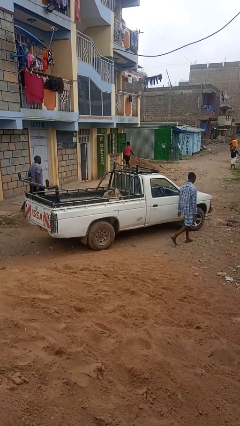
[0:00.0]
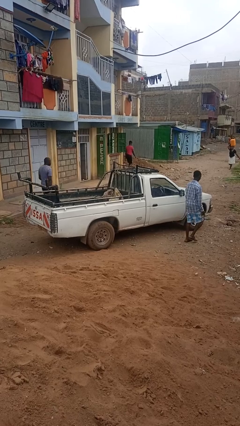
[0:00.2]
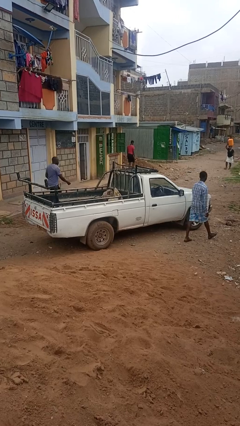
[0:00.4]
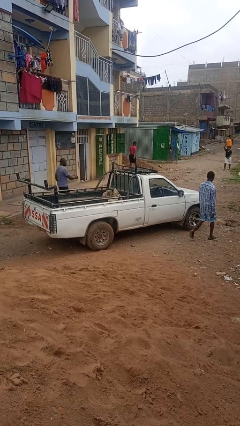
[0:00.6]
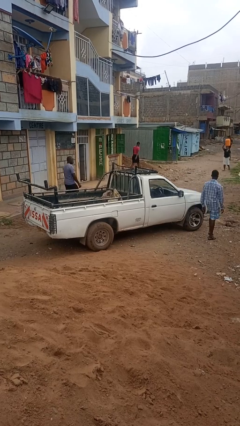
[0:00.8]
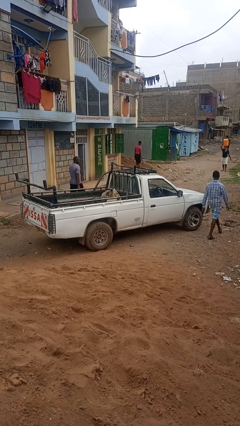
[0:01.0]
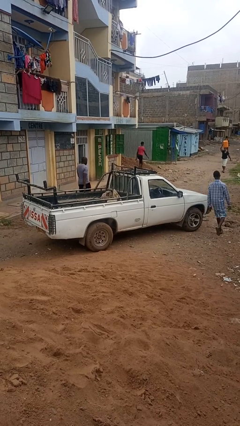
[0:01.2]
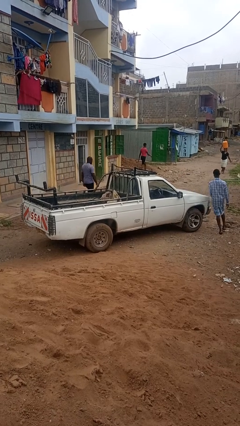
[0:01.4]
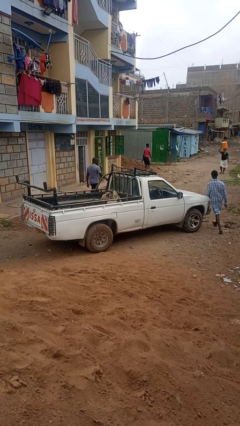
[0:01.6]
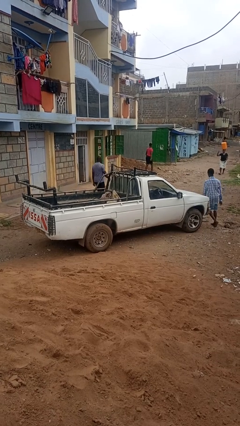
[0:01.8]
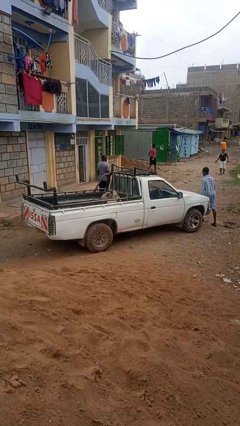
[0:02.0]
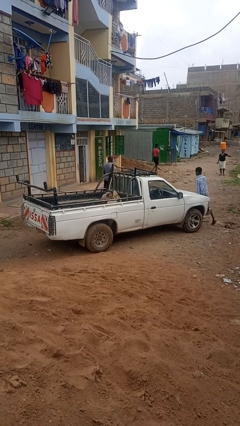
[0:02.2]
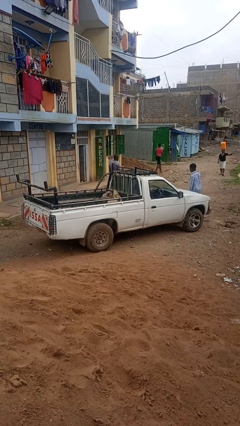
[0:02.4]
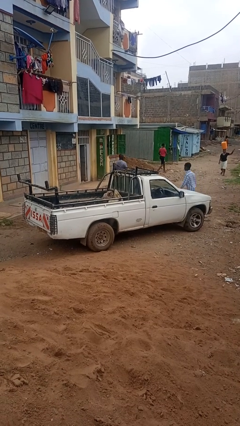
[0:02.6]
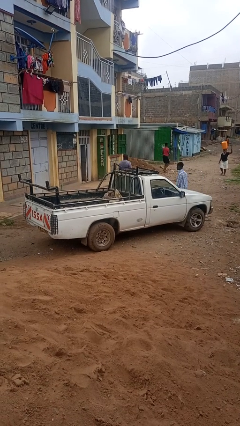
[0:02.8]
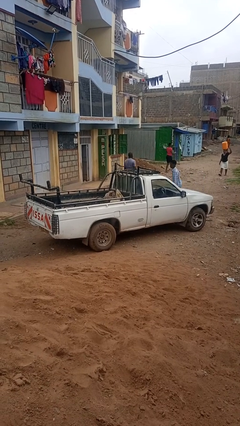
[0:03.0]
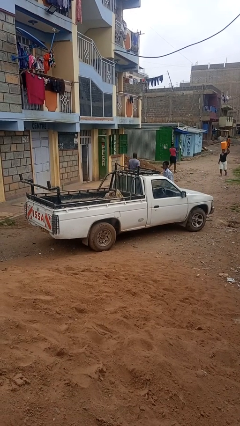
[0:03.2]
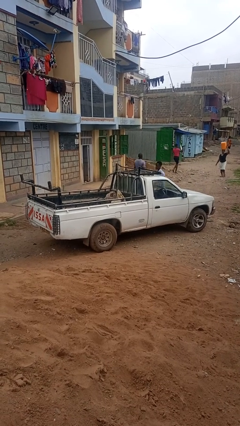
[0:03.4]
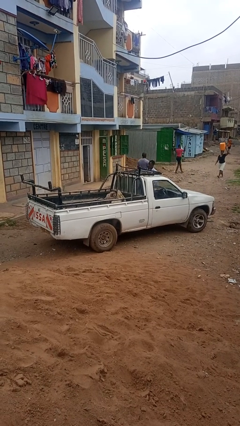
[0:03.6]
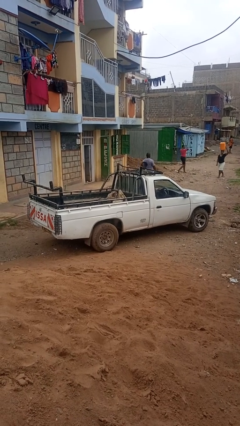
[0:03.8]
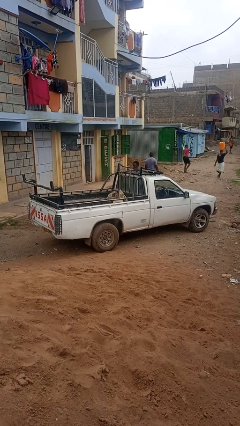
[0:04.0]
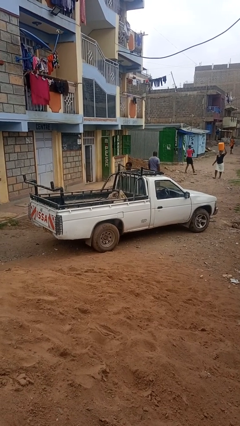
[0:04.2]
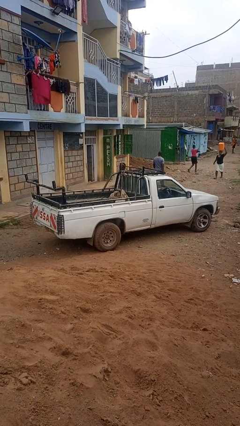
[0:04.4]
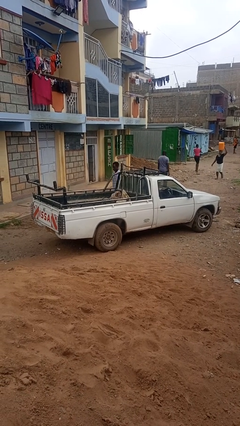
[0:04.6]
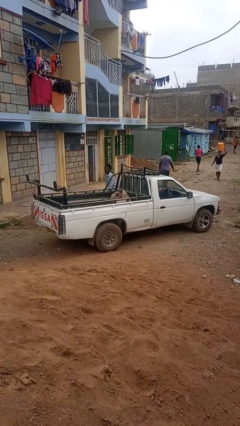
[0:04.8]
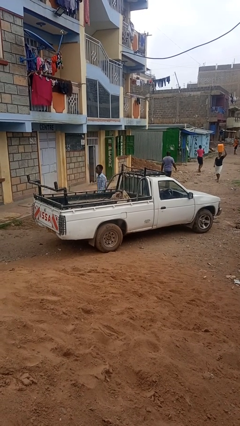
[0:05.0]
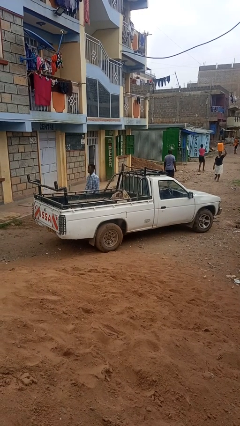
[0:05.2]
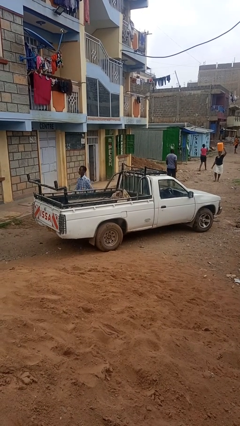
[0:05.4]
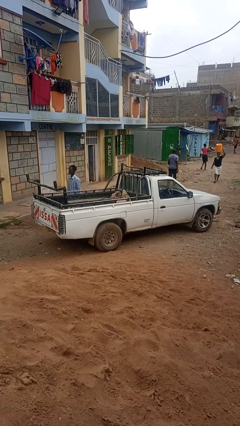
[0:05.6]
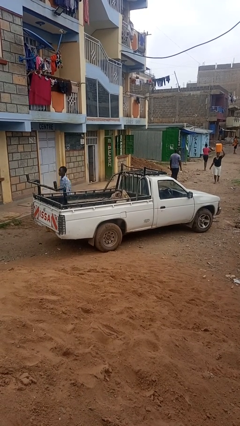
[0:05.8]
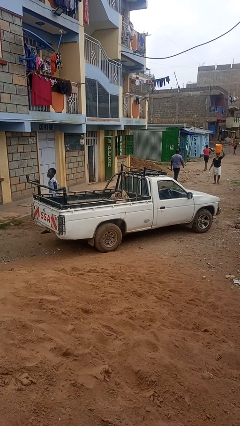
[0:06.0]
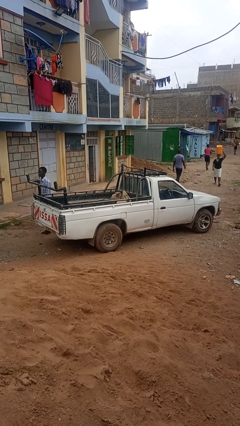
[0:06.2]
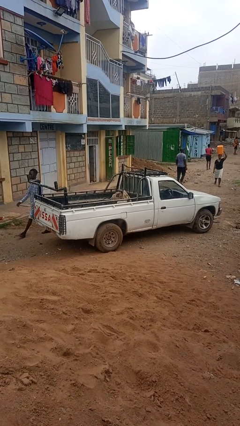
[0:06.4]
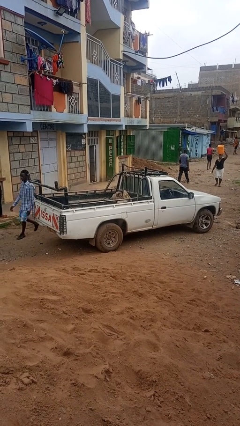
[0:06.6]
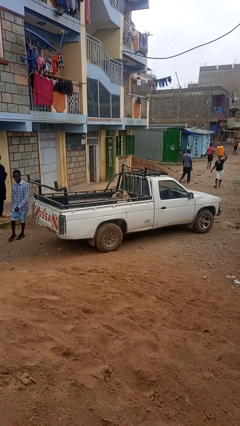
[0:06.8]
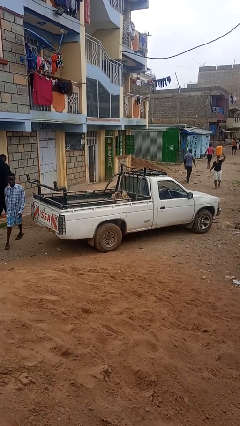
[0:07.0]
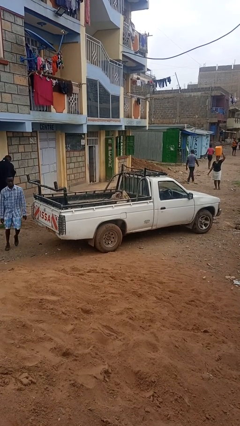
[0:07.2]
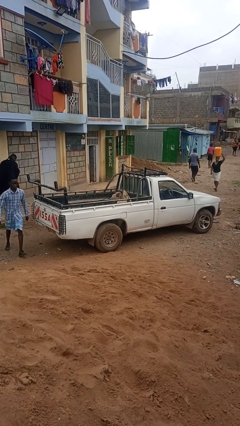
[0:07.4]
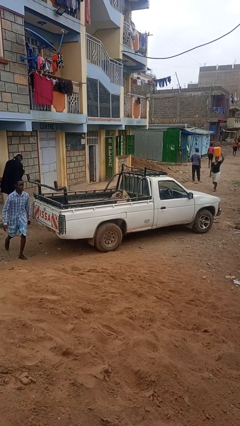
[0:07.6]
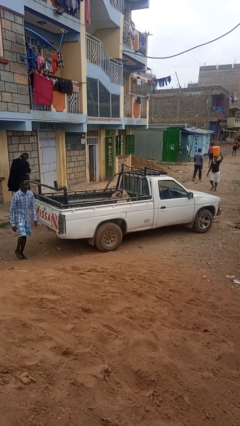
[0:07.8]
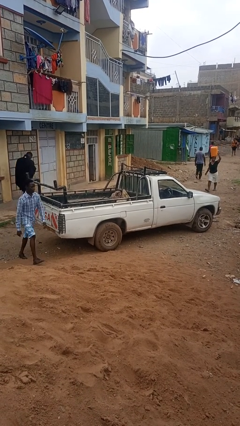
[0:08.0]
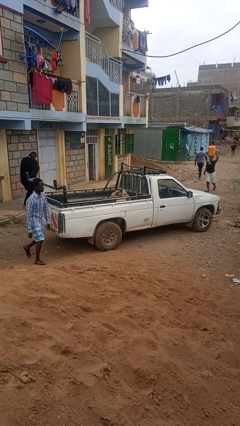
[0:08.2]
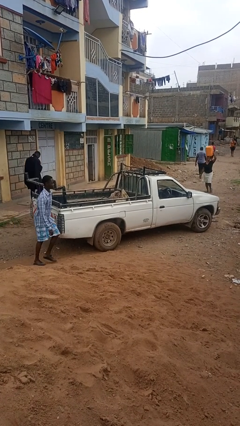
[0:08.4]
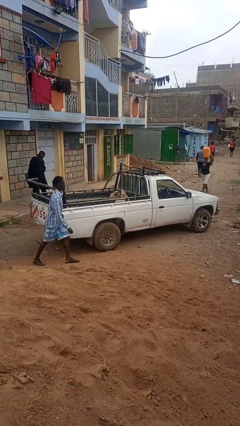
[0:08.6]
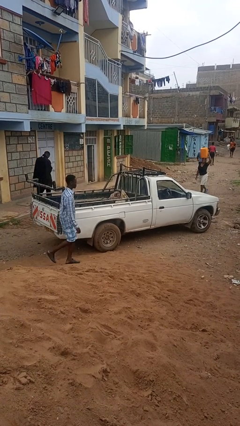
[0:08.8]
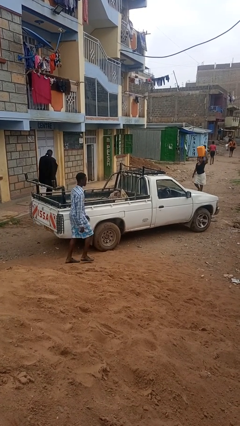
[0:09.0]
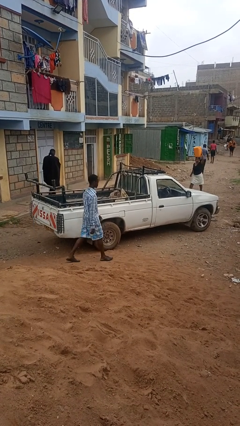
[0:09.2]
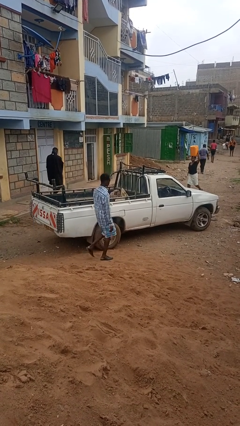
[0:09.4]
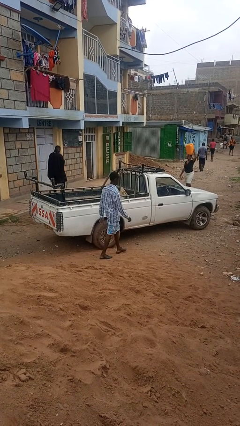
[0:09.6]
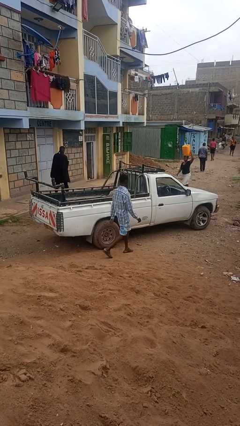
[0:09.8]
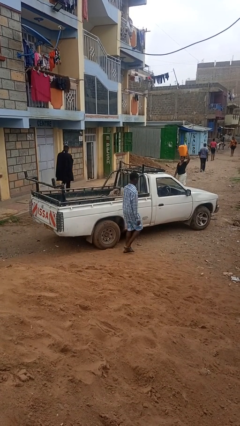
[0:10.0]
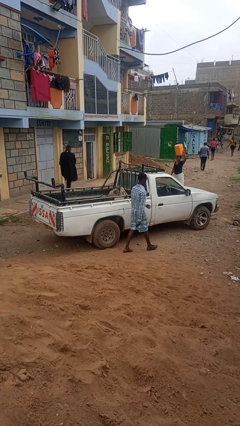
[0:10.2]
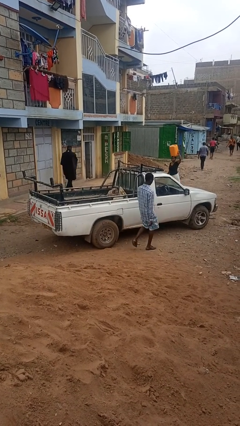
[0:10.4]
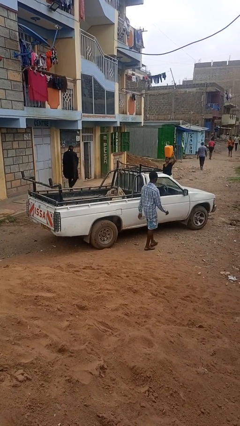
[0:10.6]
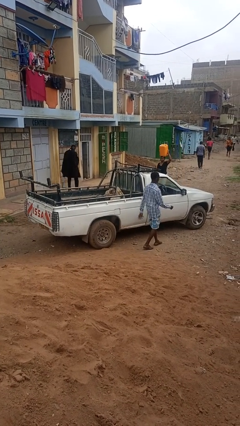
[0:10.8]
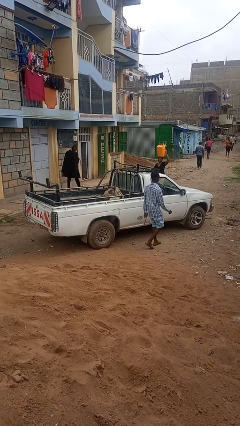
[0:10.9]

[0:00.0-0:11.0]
person walks around car

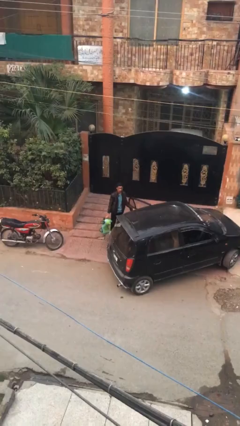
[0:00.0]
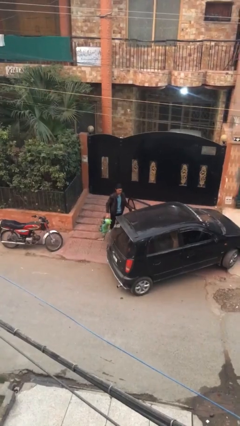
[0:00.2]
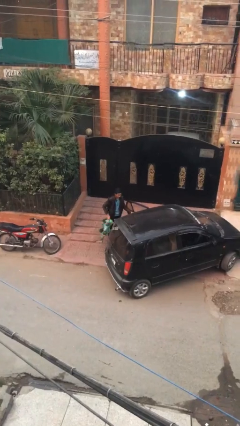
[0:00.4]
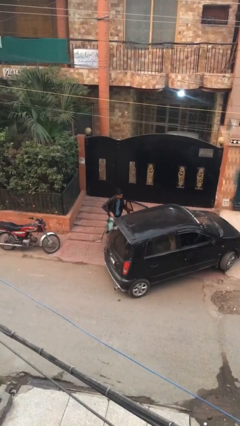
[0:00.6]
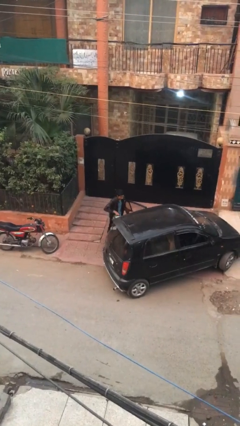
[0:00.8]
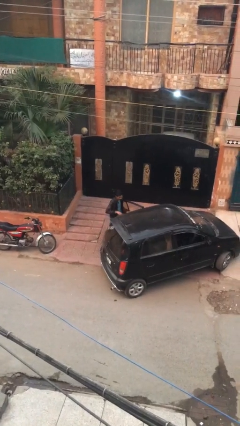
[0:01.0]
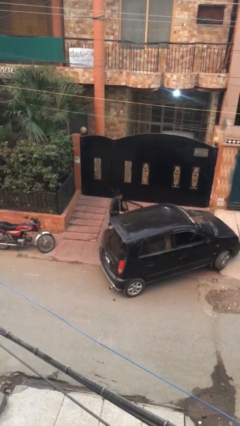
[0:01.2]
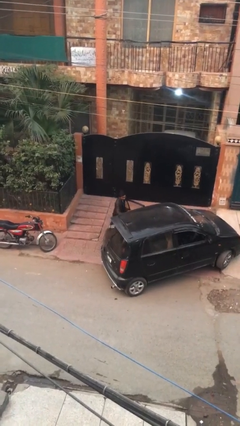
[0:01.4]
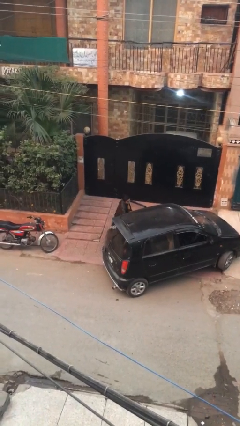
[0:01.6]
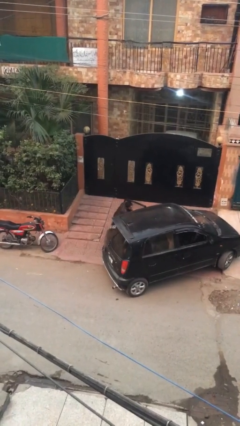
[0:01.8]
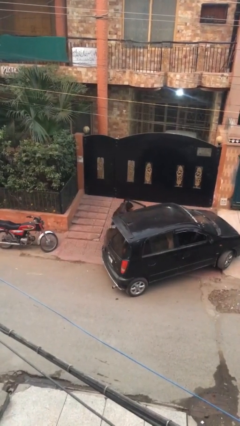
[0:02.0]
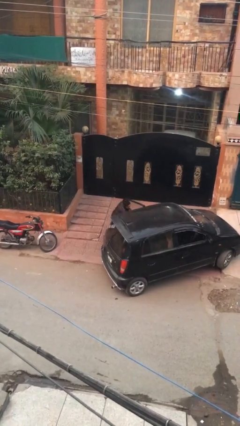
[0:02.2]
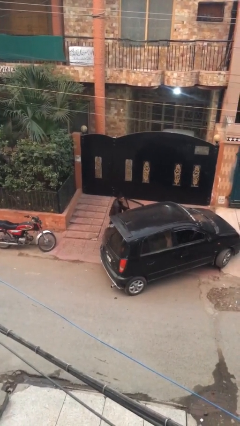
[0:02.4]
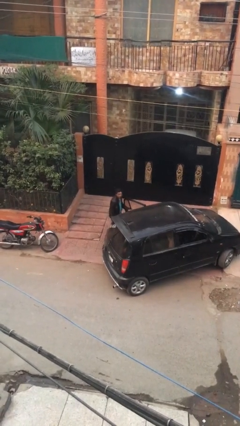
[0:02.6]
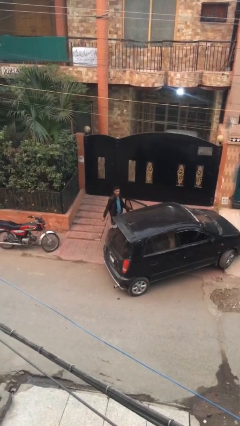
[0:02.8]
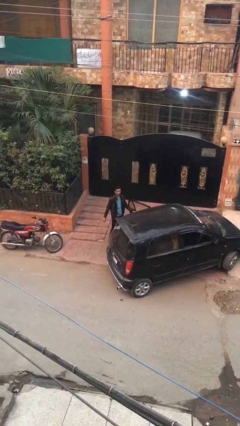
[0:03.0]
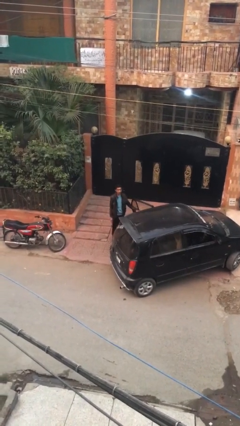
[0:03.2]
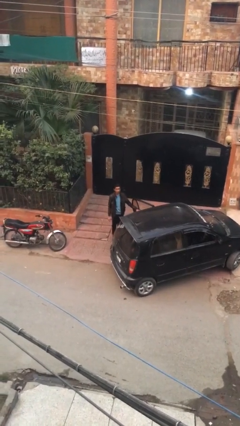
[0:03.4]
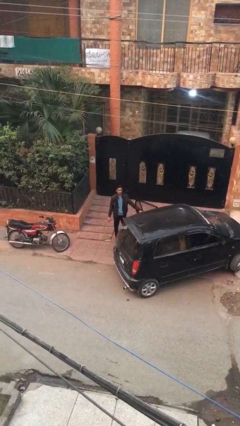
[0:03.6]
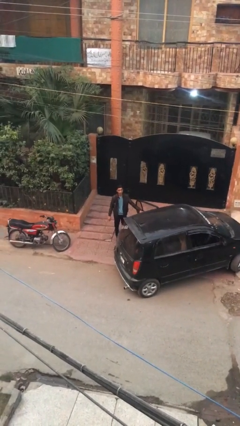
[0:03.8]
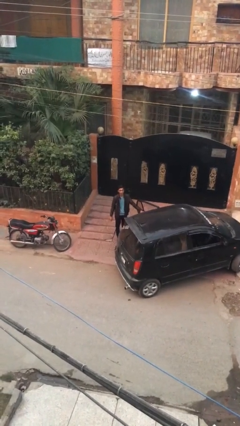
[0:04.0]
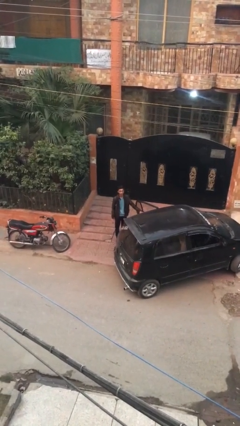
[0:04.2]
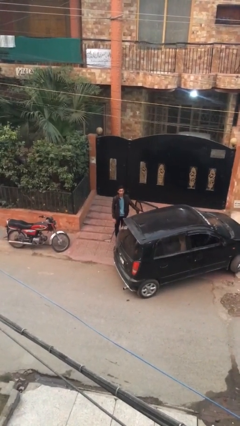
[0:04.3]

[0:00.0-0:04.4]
person loads car

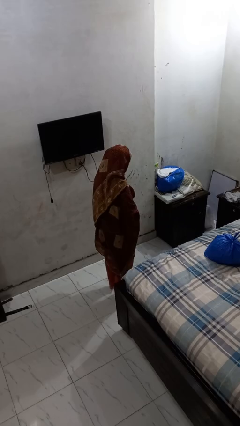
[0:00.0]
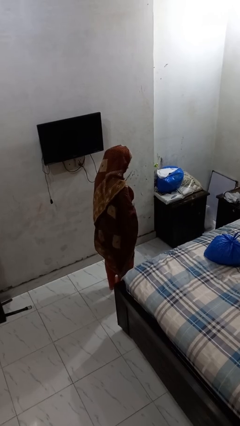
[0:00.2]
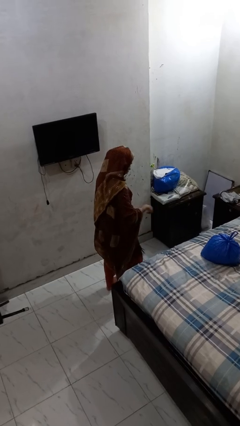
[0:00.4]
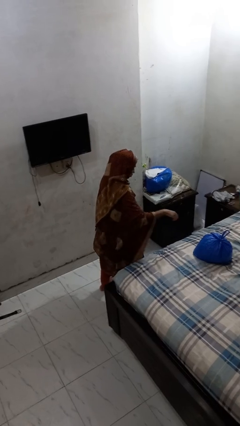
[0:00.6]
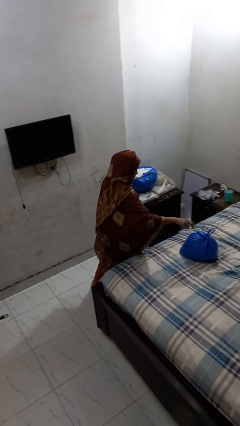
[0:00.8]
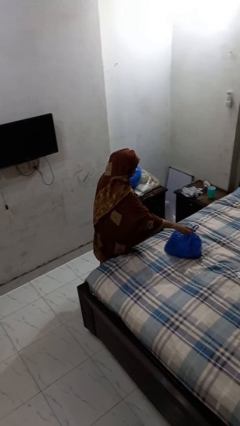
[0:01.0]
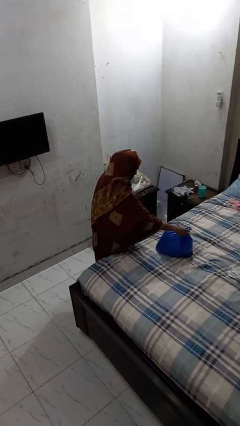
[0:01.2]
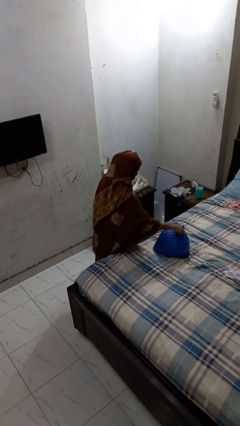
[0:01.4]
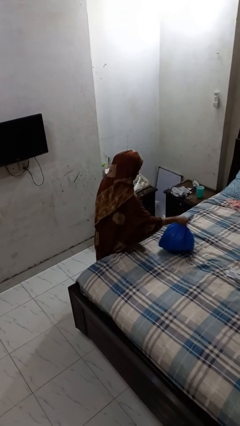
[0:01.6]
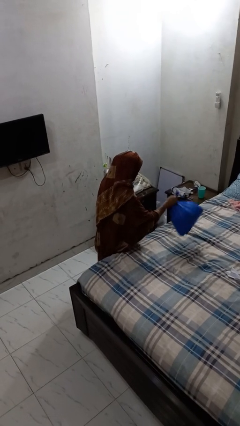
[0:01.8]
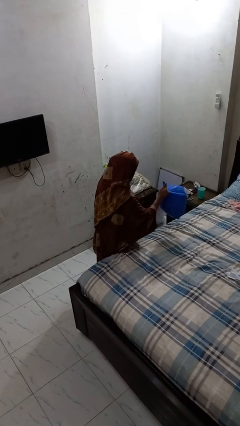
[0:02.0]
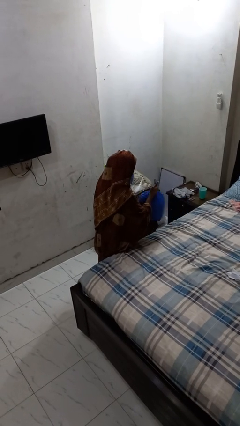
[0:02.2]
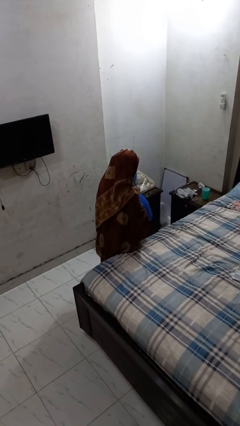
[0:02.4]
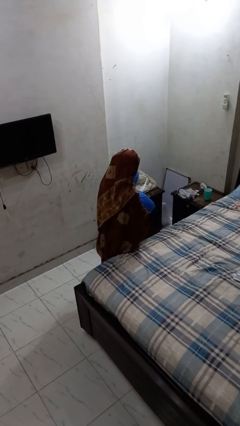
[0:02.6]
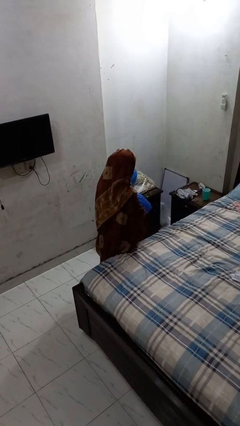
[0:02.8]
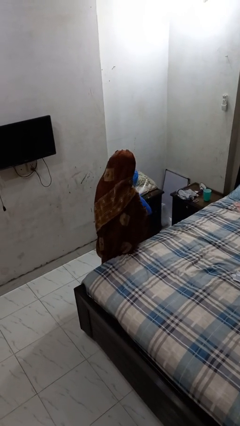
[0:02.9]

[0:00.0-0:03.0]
person picks up object from bed
